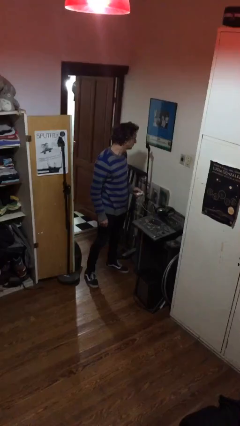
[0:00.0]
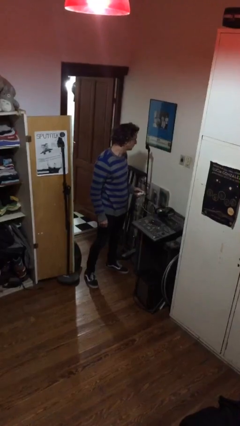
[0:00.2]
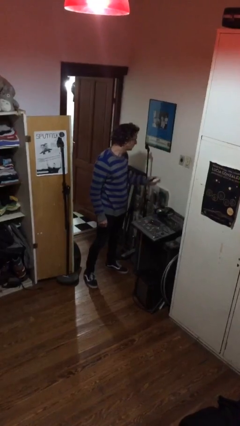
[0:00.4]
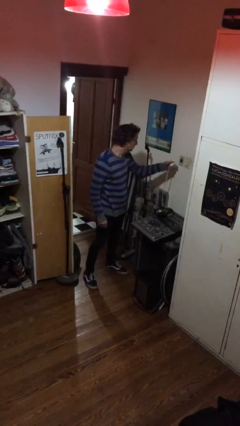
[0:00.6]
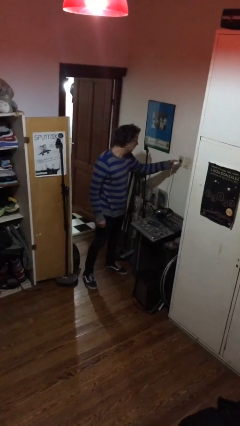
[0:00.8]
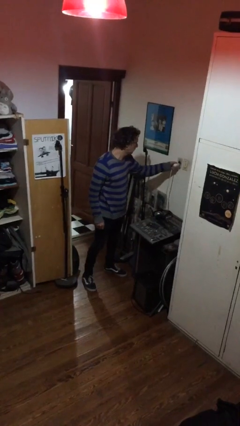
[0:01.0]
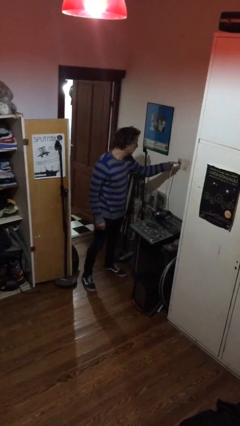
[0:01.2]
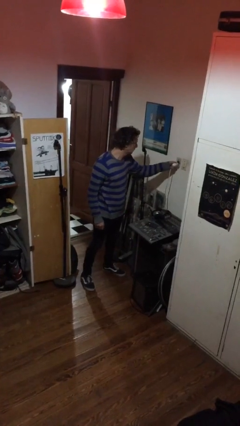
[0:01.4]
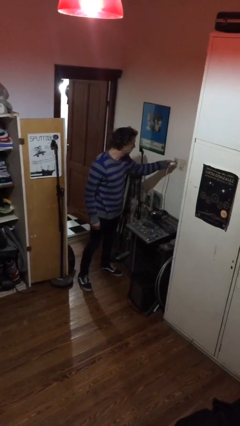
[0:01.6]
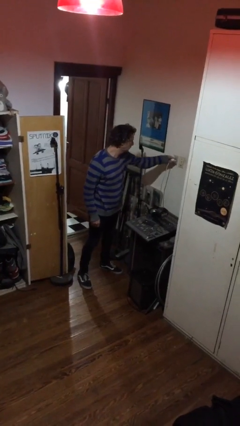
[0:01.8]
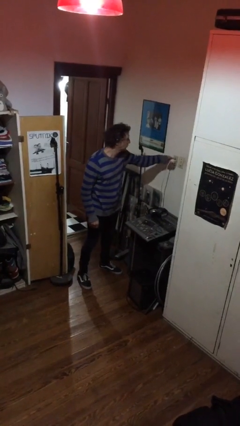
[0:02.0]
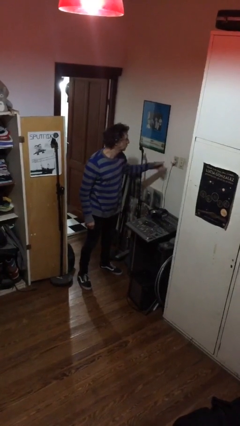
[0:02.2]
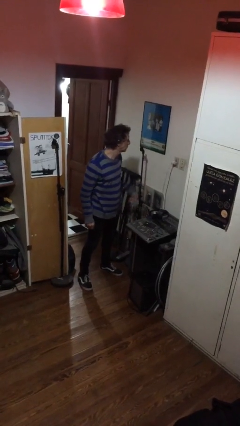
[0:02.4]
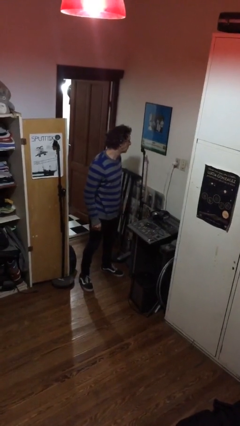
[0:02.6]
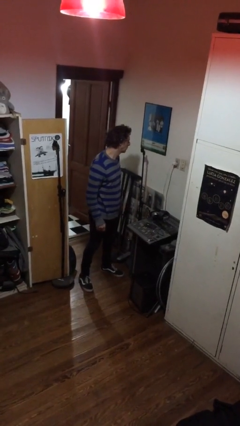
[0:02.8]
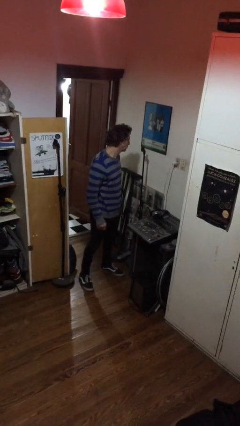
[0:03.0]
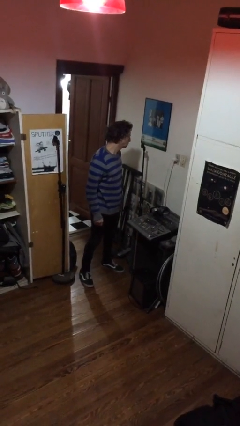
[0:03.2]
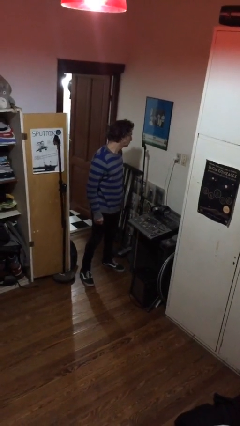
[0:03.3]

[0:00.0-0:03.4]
person plugs into electrical socket

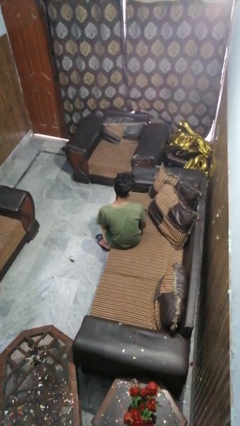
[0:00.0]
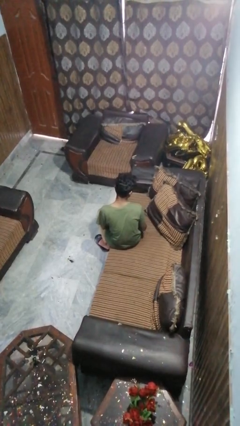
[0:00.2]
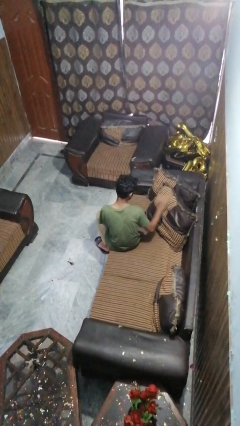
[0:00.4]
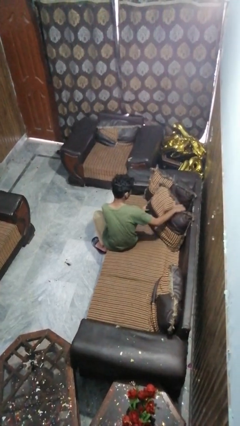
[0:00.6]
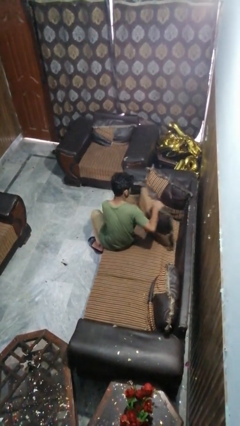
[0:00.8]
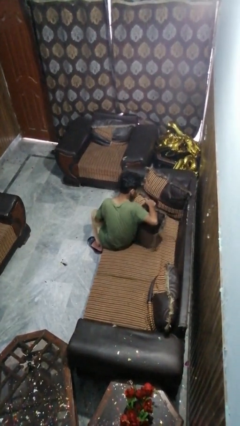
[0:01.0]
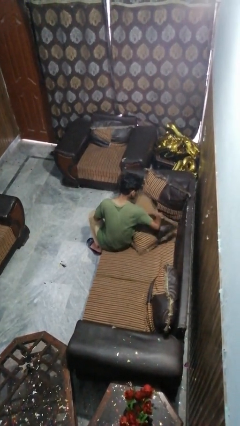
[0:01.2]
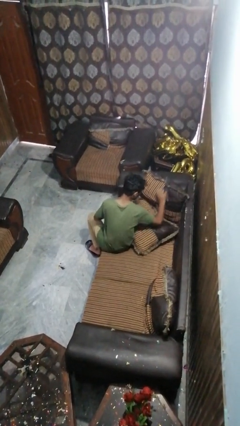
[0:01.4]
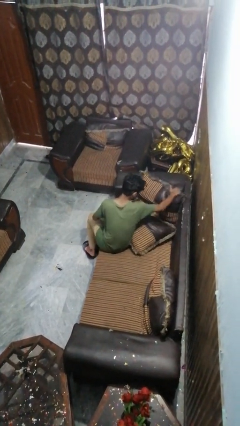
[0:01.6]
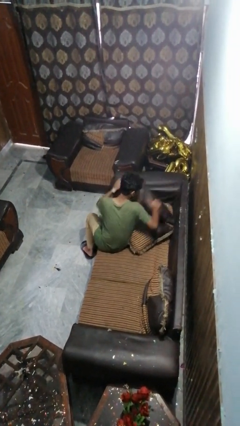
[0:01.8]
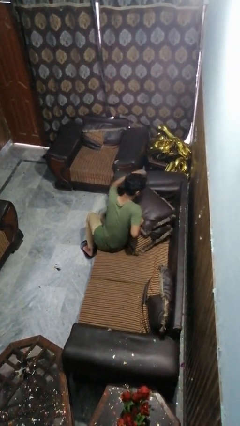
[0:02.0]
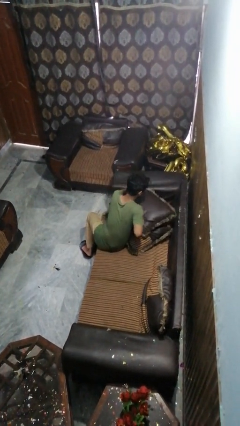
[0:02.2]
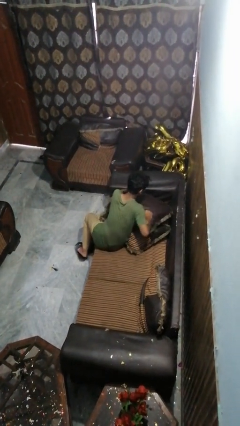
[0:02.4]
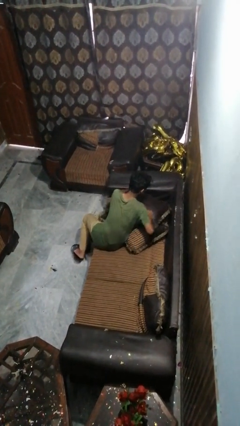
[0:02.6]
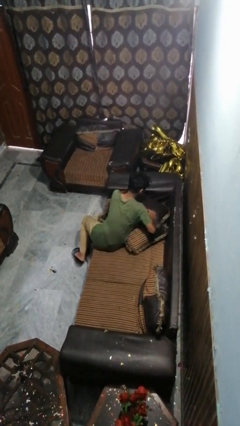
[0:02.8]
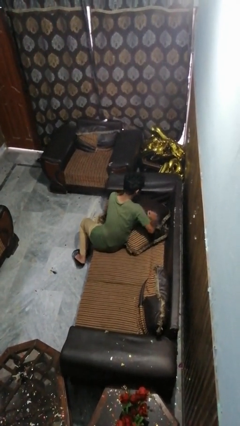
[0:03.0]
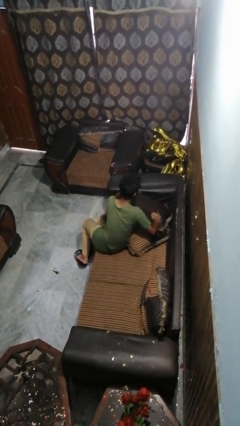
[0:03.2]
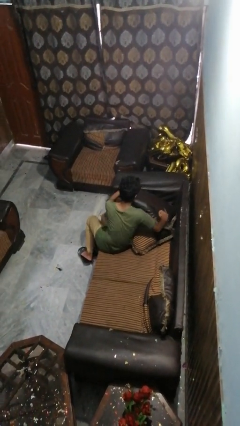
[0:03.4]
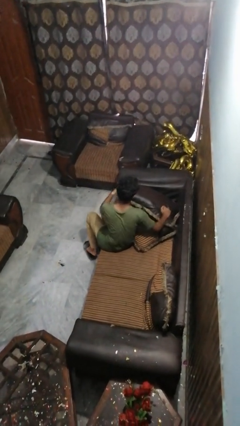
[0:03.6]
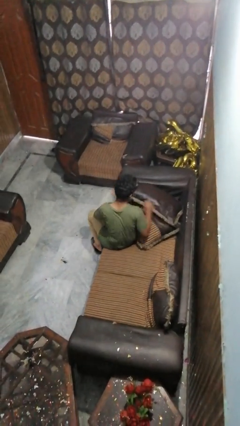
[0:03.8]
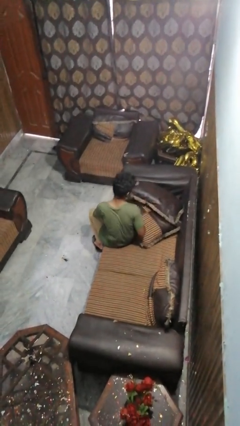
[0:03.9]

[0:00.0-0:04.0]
person searches in couch

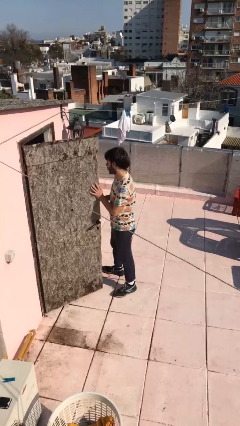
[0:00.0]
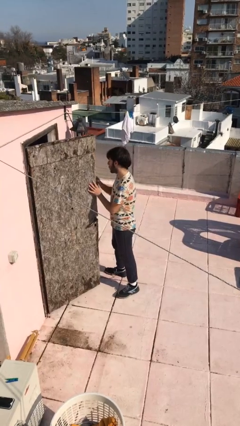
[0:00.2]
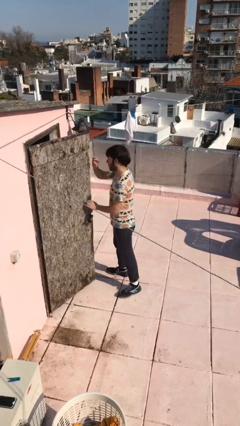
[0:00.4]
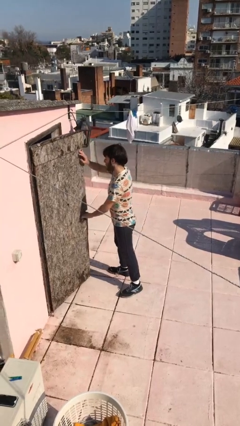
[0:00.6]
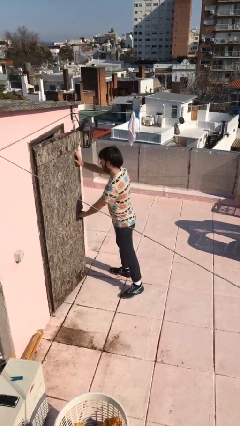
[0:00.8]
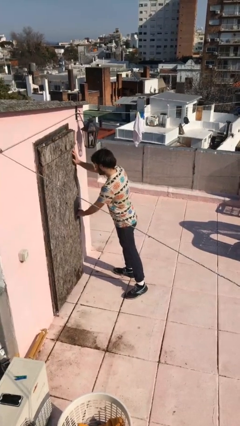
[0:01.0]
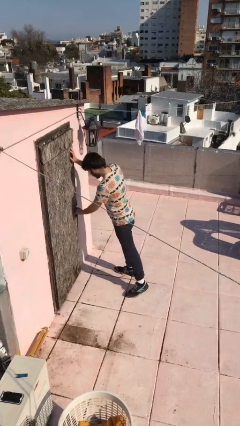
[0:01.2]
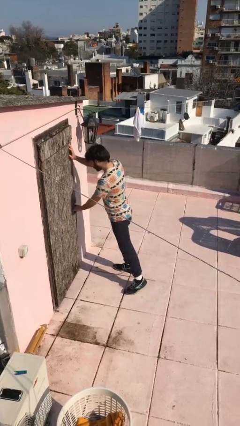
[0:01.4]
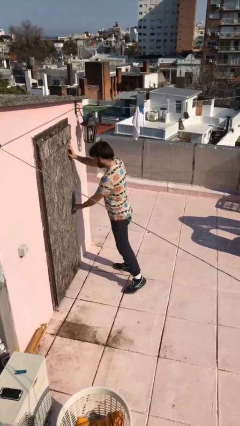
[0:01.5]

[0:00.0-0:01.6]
person closes facility door

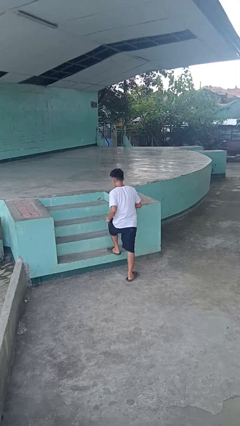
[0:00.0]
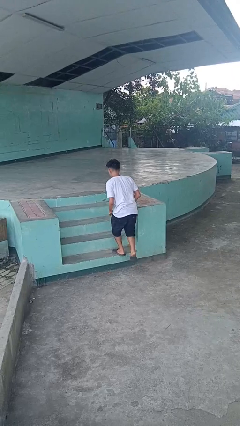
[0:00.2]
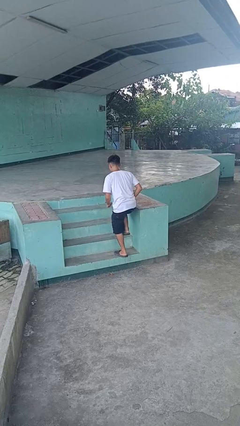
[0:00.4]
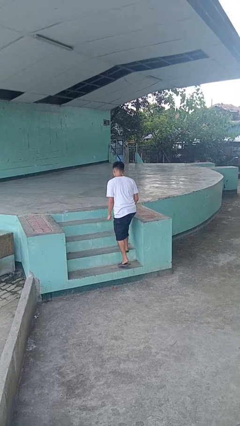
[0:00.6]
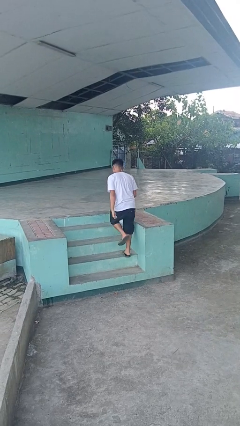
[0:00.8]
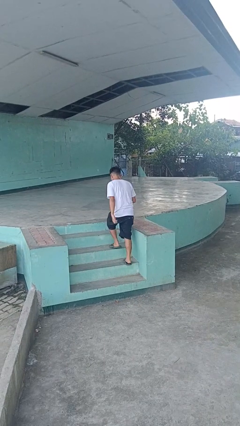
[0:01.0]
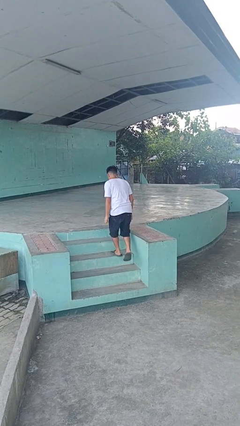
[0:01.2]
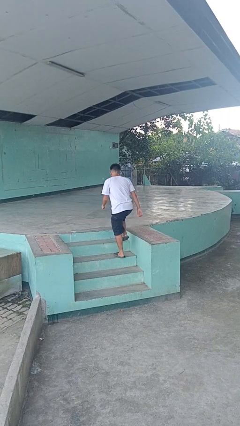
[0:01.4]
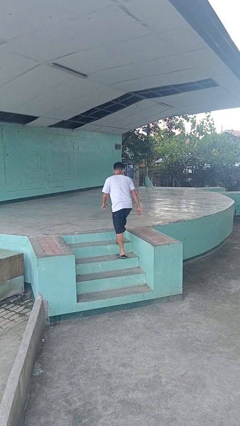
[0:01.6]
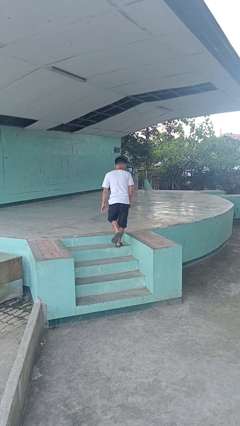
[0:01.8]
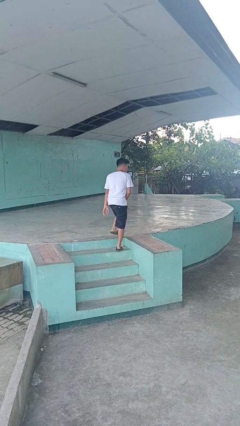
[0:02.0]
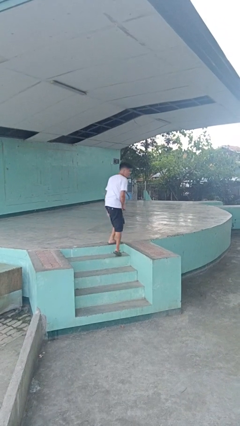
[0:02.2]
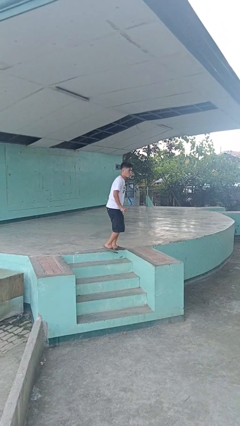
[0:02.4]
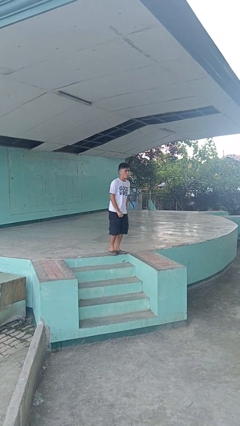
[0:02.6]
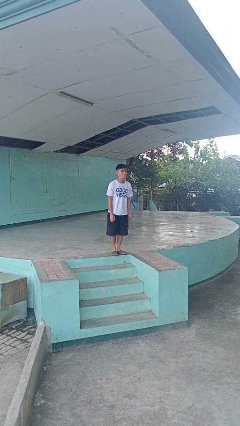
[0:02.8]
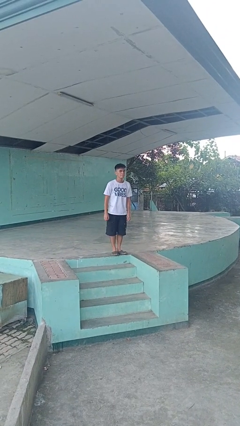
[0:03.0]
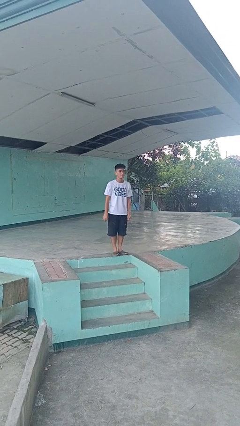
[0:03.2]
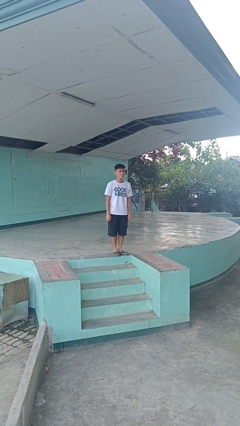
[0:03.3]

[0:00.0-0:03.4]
person climbs up stairs

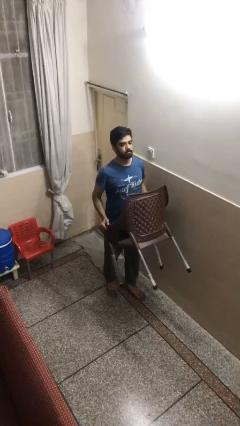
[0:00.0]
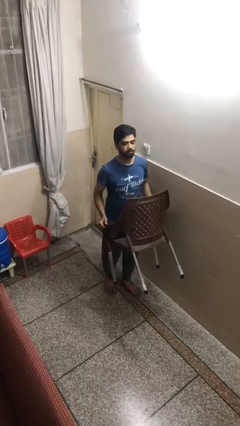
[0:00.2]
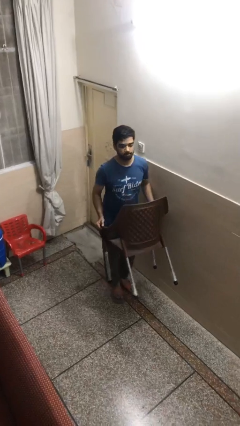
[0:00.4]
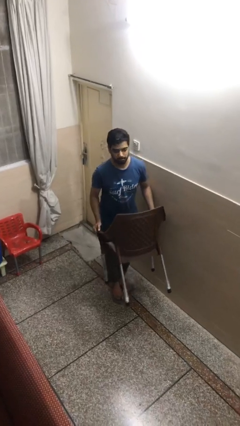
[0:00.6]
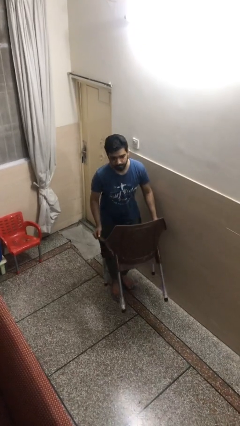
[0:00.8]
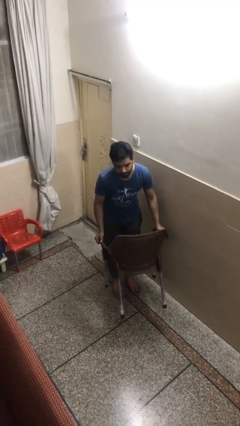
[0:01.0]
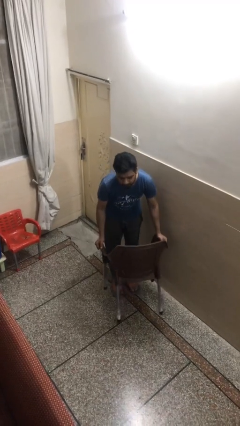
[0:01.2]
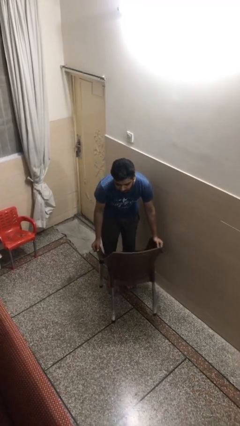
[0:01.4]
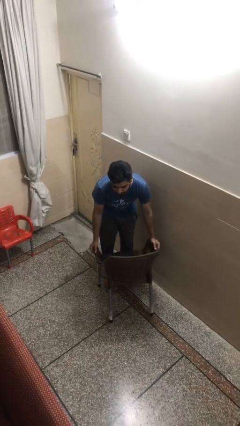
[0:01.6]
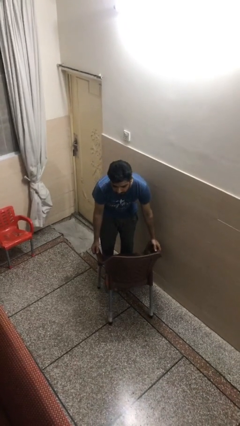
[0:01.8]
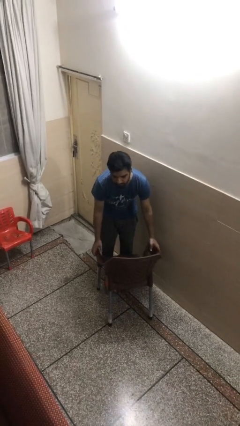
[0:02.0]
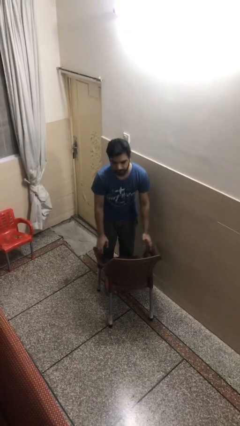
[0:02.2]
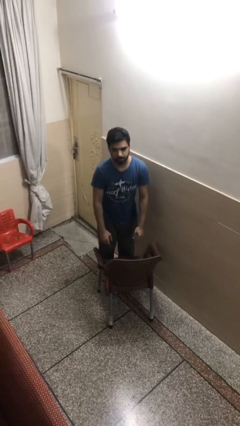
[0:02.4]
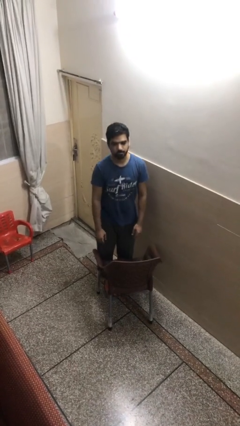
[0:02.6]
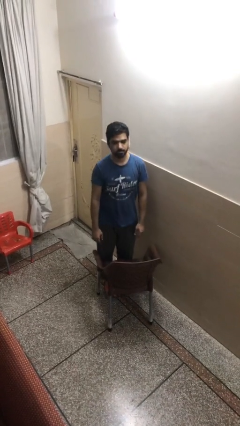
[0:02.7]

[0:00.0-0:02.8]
person puts down object on floor

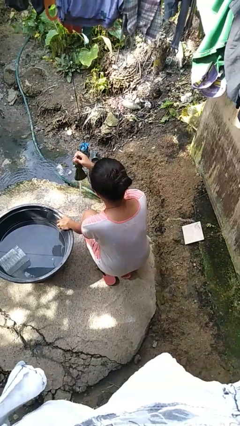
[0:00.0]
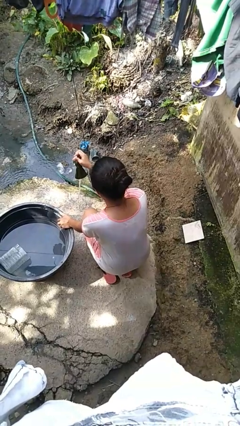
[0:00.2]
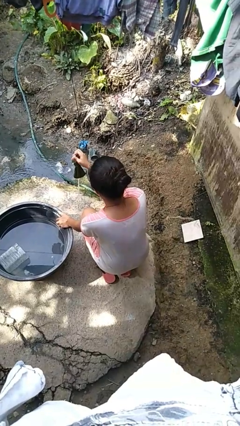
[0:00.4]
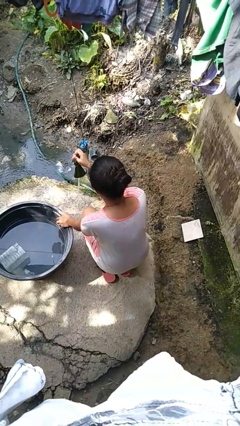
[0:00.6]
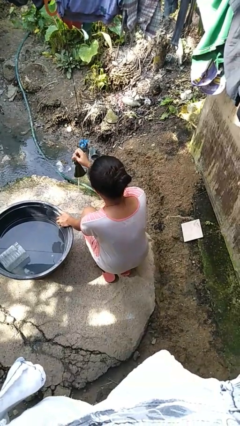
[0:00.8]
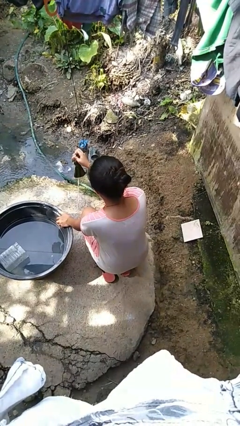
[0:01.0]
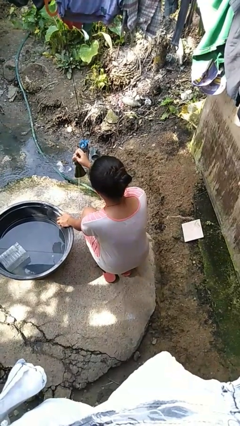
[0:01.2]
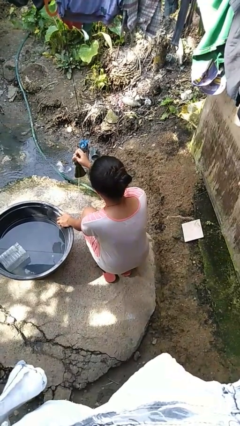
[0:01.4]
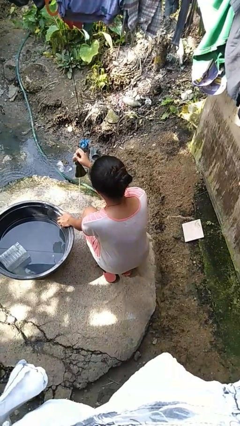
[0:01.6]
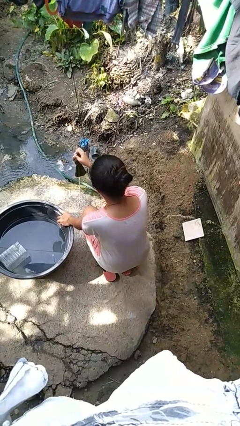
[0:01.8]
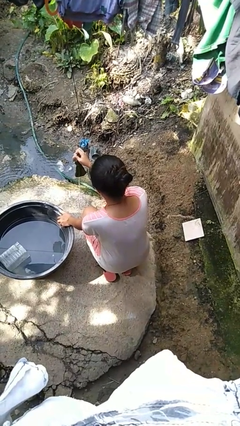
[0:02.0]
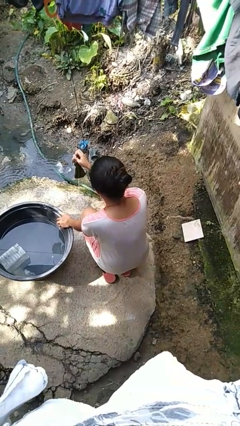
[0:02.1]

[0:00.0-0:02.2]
person turns off faucet

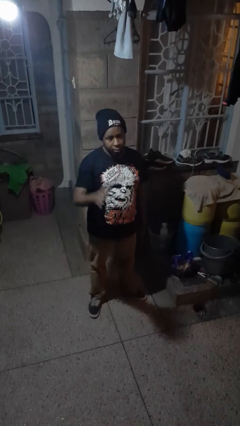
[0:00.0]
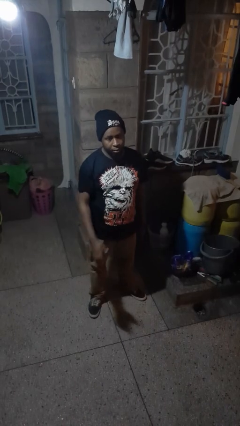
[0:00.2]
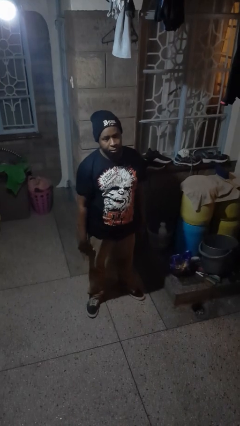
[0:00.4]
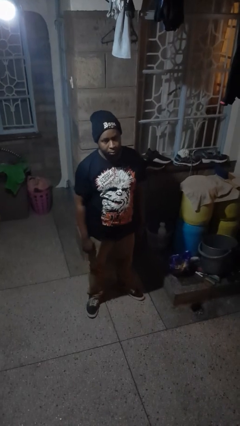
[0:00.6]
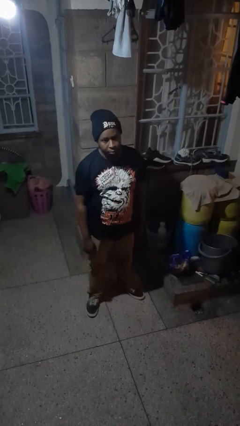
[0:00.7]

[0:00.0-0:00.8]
person gestures lower hand
